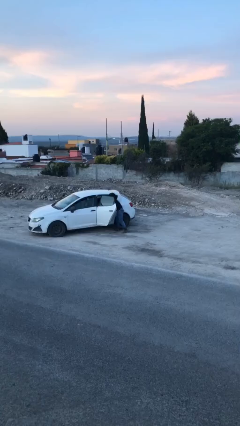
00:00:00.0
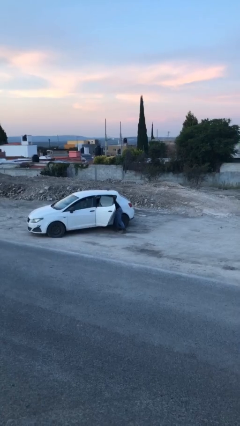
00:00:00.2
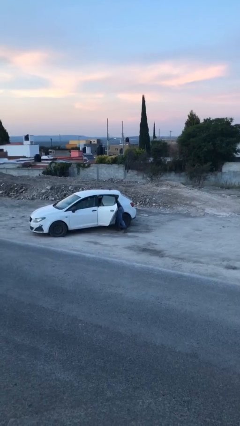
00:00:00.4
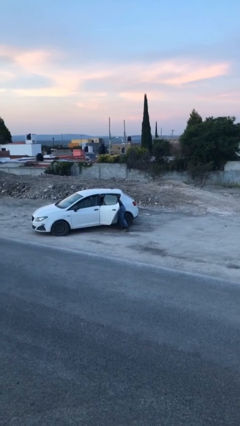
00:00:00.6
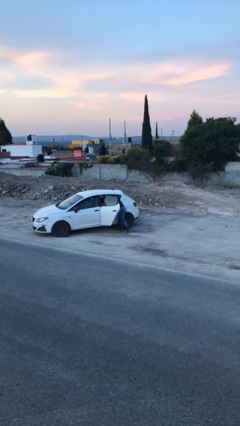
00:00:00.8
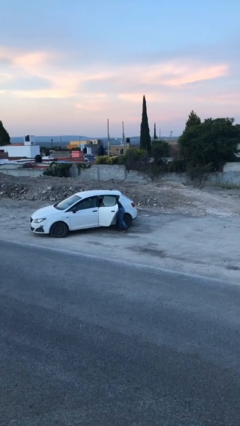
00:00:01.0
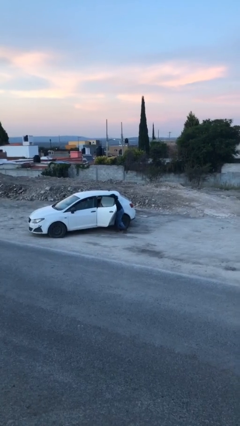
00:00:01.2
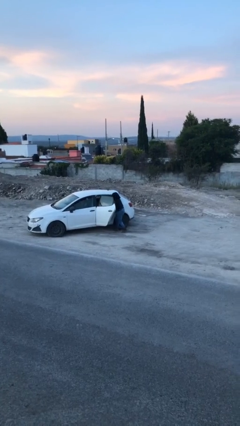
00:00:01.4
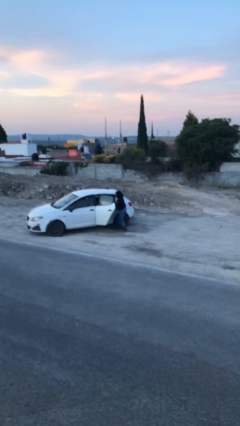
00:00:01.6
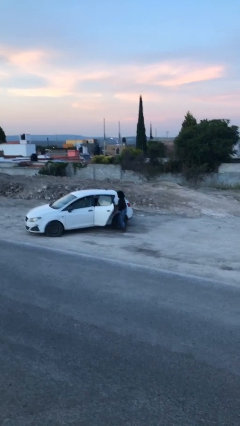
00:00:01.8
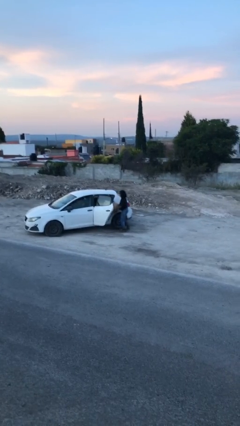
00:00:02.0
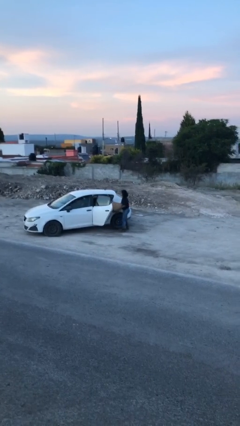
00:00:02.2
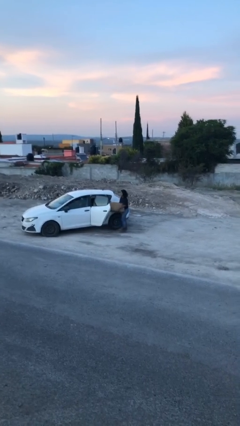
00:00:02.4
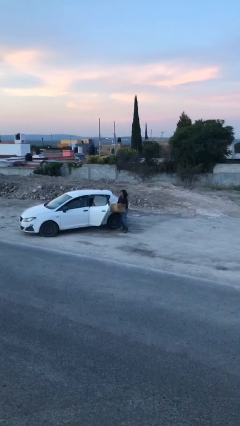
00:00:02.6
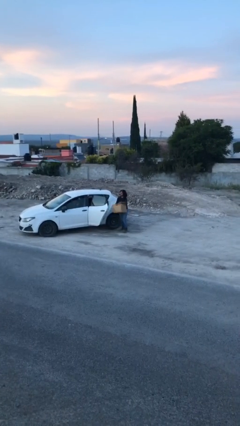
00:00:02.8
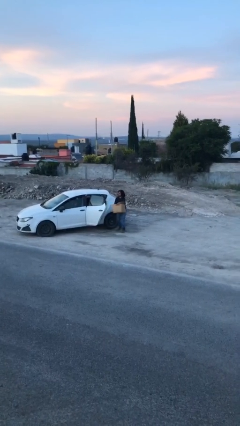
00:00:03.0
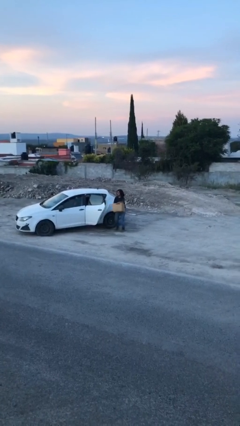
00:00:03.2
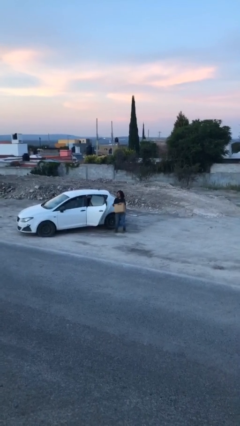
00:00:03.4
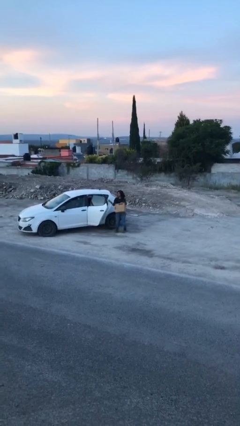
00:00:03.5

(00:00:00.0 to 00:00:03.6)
person unloads car

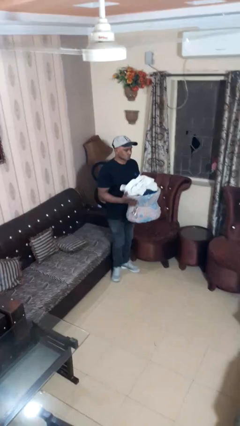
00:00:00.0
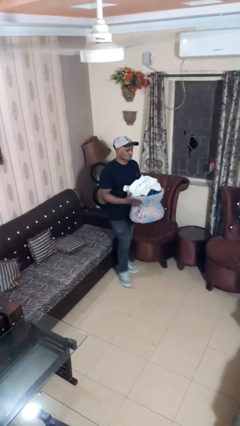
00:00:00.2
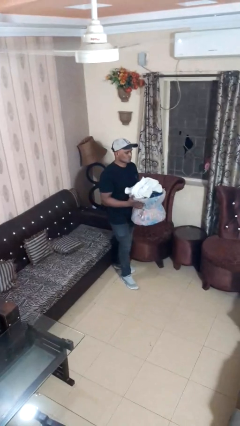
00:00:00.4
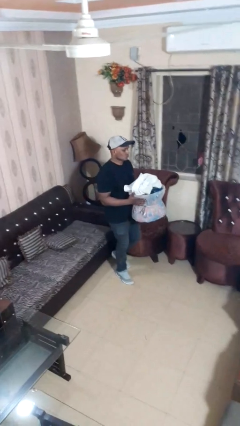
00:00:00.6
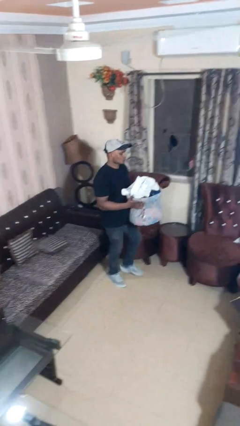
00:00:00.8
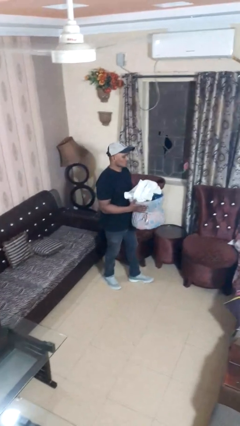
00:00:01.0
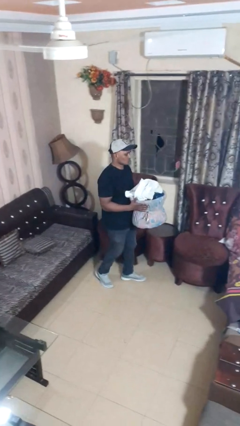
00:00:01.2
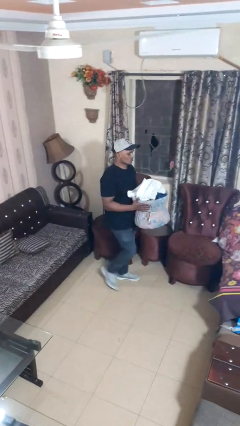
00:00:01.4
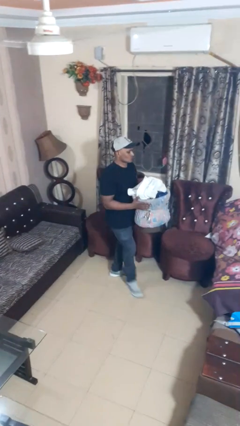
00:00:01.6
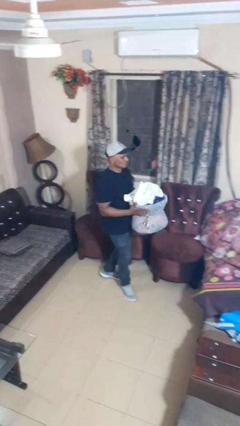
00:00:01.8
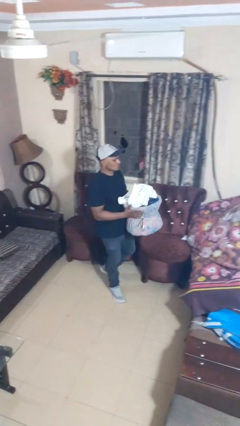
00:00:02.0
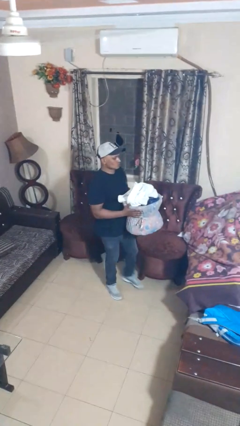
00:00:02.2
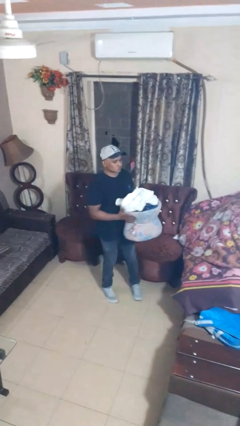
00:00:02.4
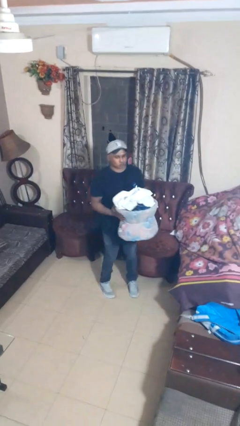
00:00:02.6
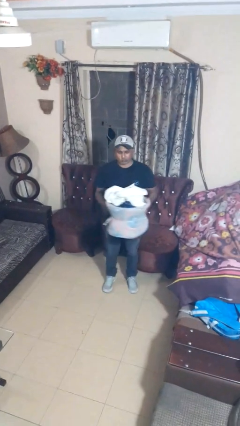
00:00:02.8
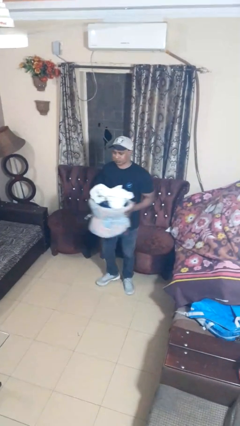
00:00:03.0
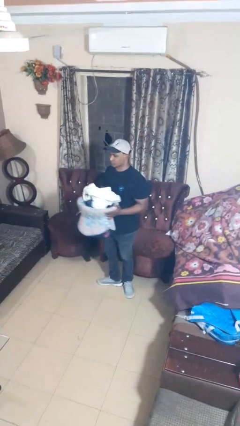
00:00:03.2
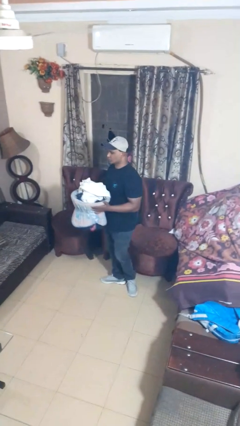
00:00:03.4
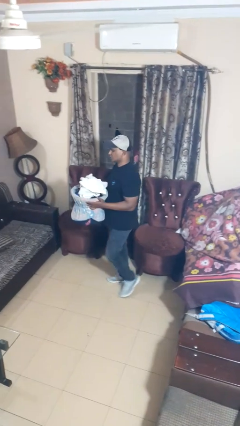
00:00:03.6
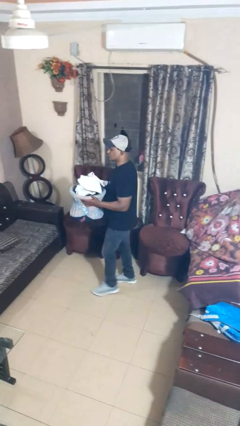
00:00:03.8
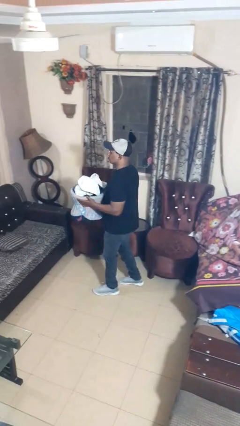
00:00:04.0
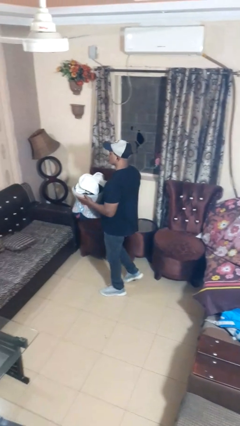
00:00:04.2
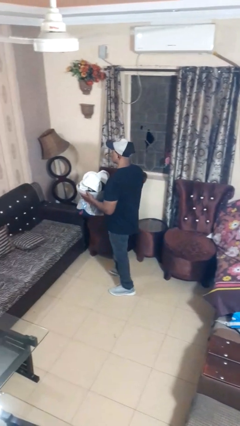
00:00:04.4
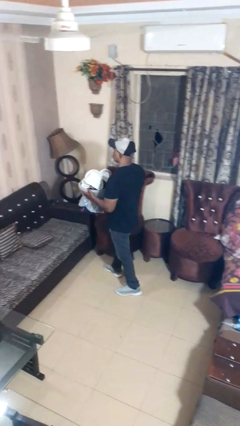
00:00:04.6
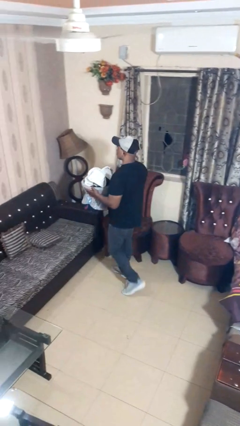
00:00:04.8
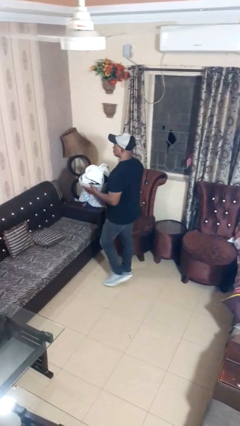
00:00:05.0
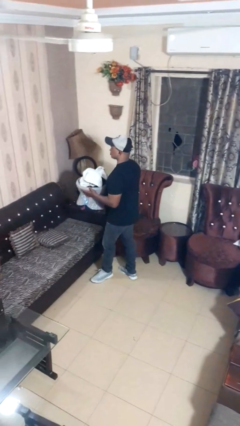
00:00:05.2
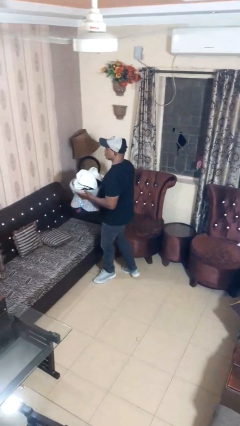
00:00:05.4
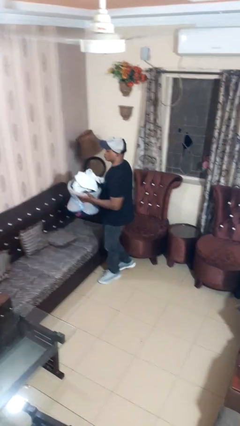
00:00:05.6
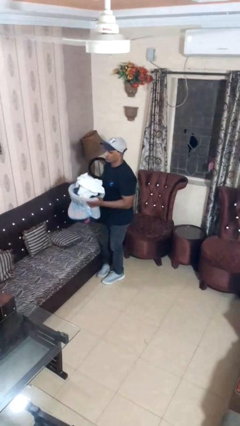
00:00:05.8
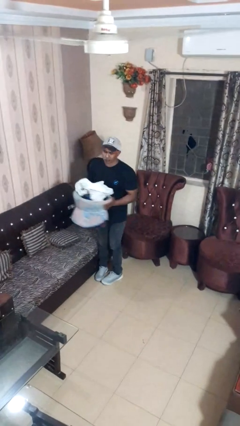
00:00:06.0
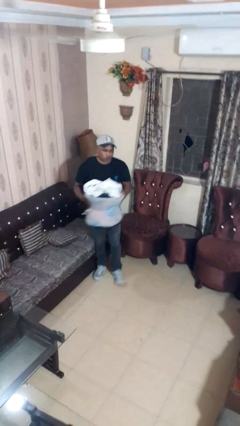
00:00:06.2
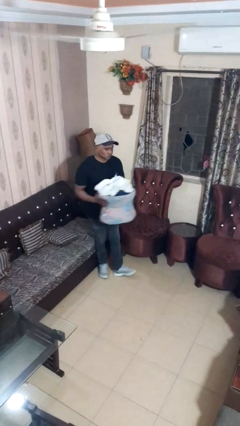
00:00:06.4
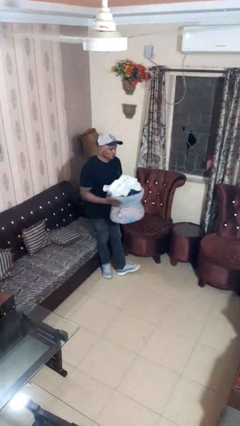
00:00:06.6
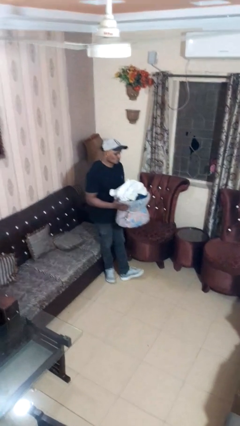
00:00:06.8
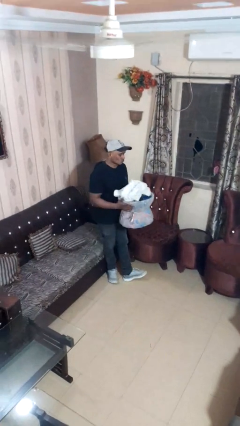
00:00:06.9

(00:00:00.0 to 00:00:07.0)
person carries laundry basket

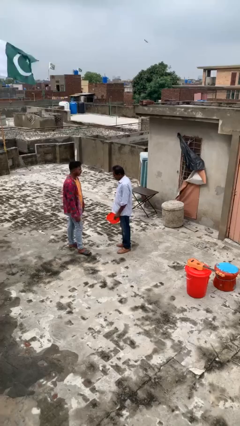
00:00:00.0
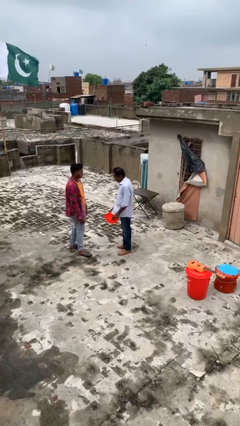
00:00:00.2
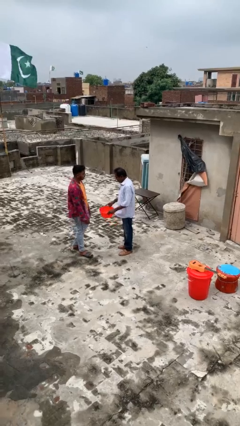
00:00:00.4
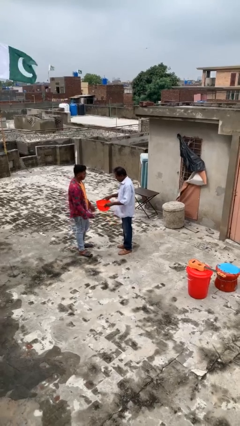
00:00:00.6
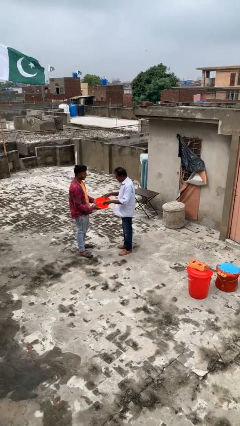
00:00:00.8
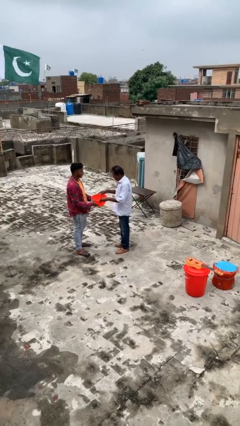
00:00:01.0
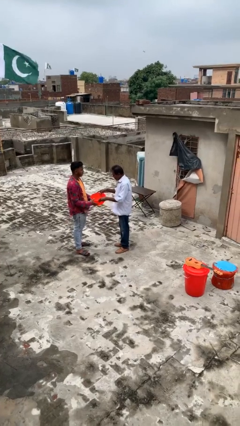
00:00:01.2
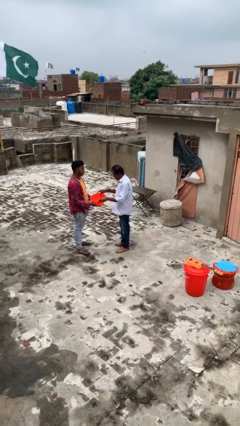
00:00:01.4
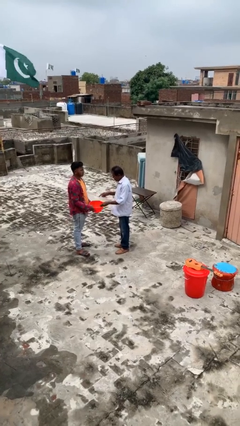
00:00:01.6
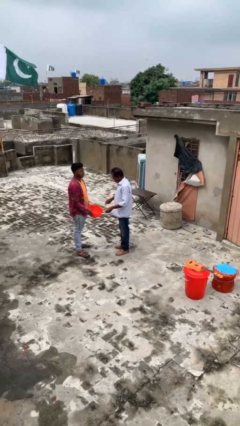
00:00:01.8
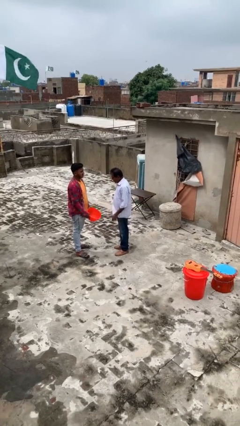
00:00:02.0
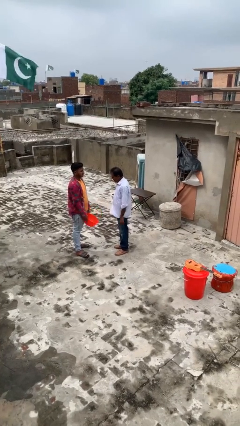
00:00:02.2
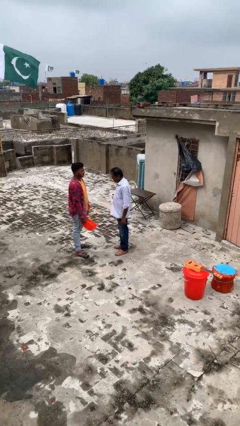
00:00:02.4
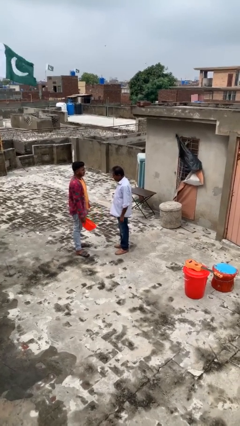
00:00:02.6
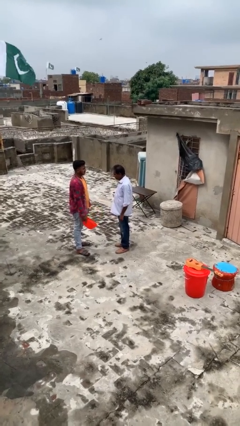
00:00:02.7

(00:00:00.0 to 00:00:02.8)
person transfers object to person

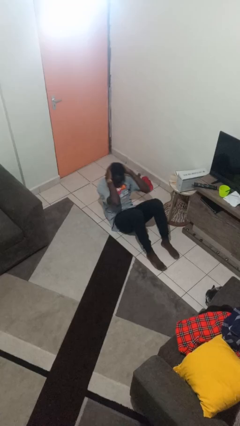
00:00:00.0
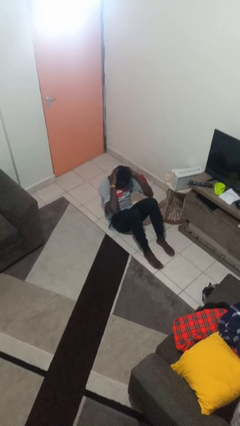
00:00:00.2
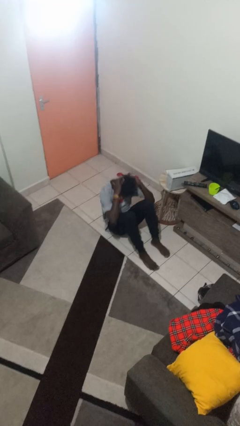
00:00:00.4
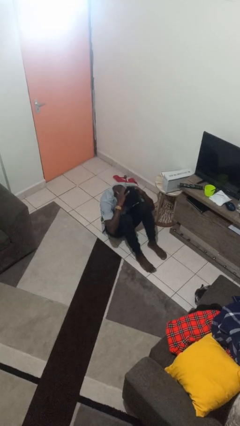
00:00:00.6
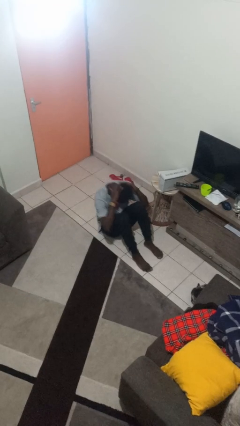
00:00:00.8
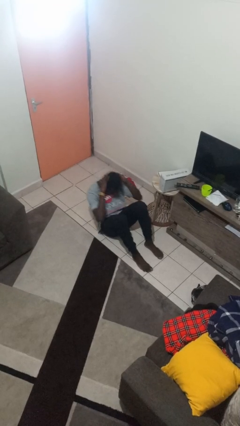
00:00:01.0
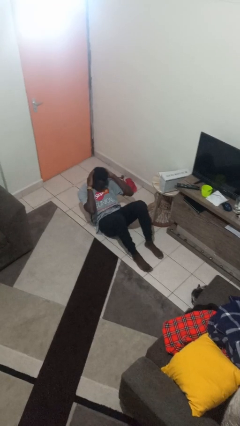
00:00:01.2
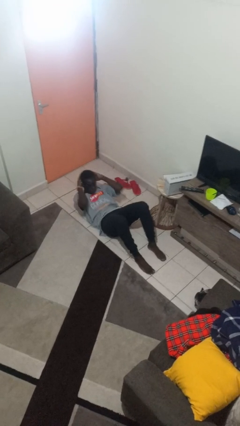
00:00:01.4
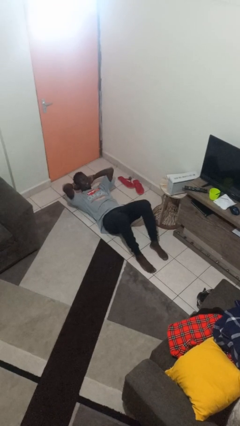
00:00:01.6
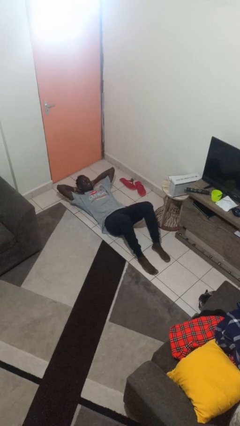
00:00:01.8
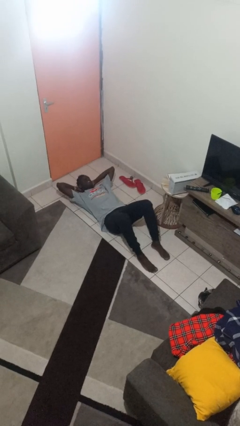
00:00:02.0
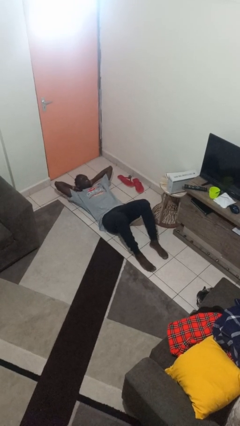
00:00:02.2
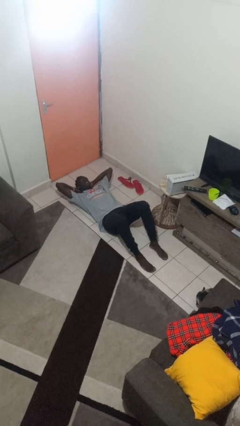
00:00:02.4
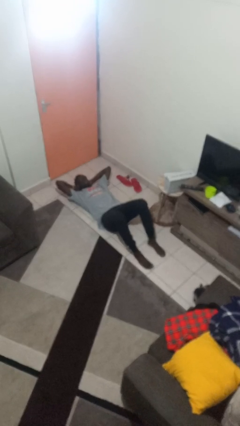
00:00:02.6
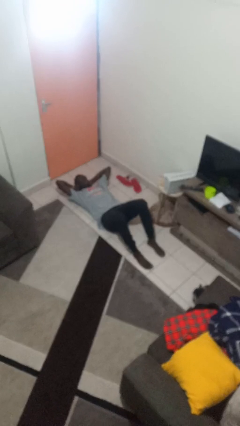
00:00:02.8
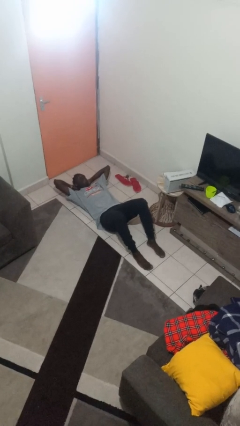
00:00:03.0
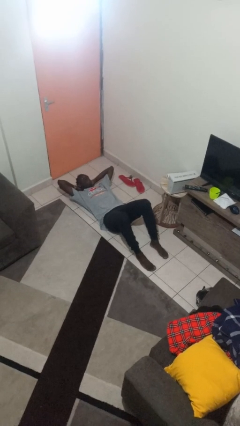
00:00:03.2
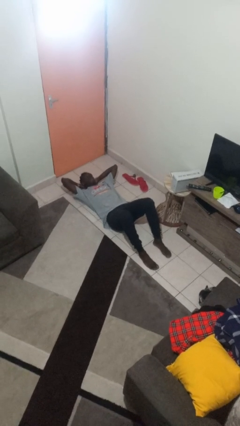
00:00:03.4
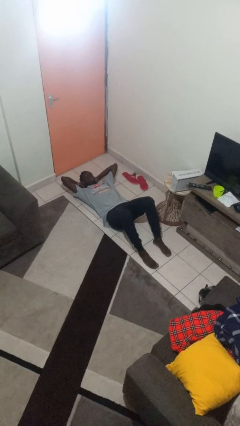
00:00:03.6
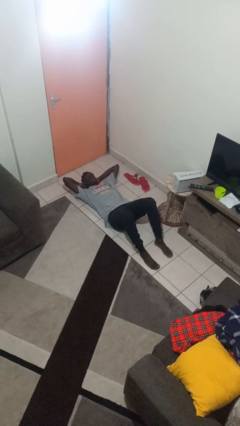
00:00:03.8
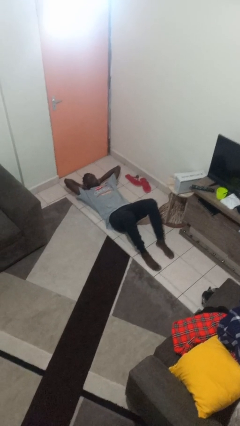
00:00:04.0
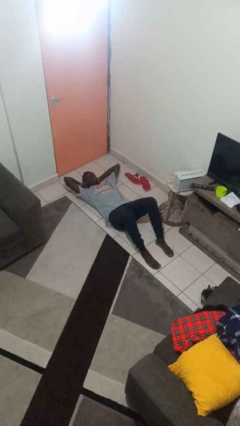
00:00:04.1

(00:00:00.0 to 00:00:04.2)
person exercises with situp
